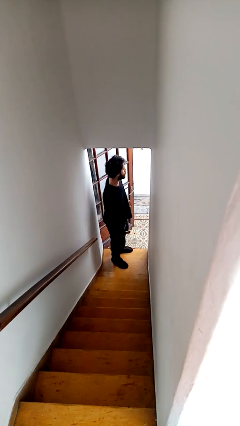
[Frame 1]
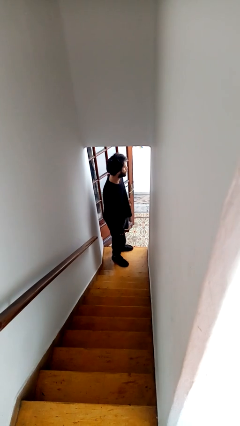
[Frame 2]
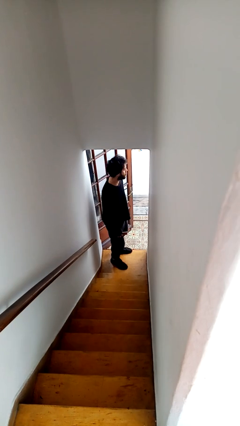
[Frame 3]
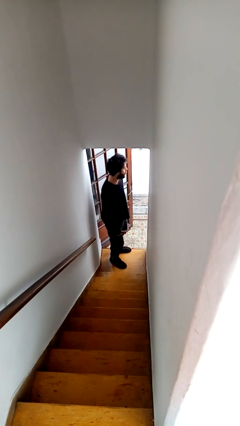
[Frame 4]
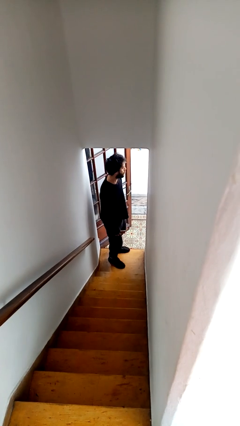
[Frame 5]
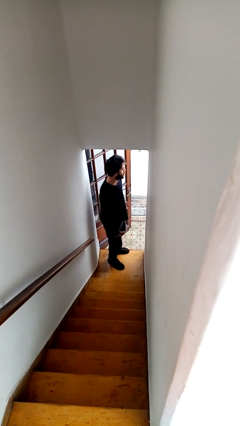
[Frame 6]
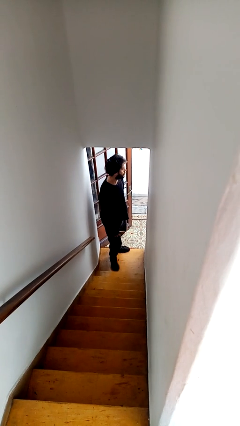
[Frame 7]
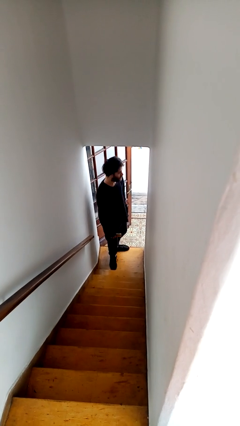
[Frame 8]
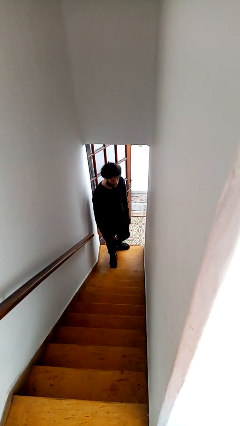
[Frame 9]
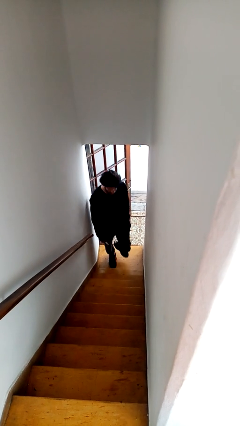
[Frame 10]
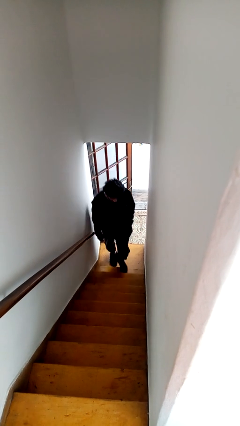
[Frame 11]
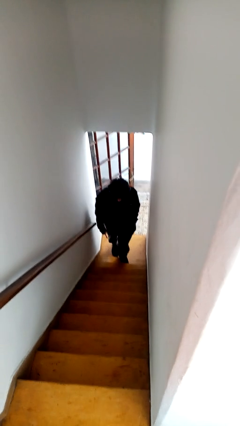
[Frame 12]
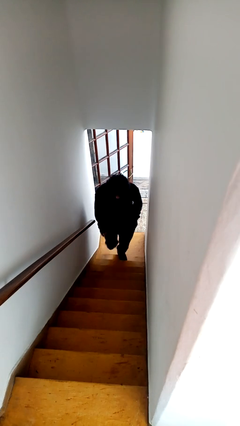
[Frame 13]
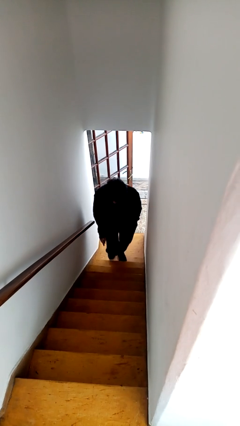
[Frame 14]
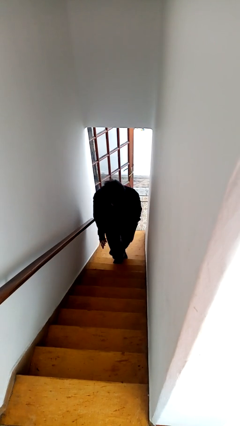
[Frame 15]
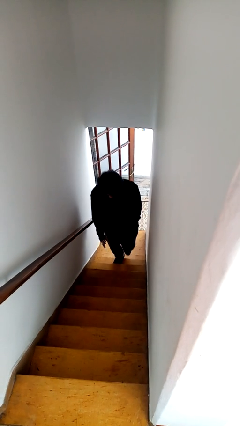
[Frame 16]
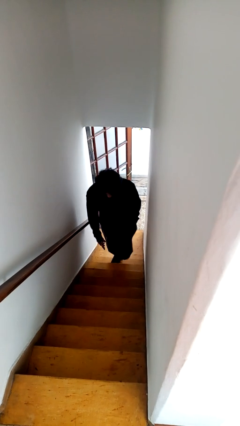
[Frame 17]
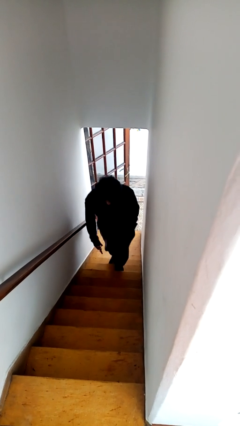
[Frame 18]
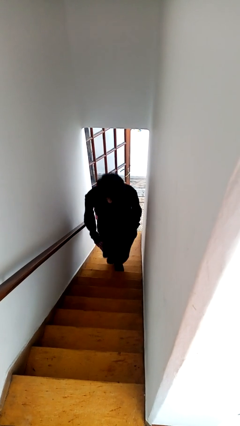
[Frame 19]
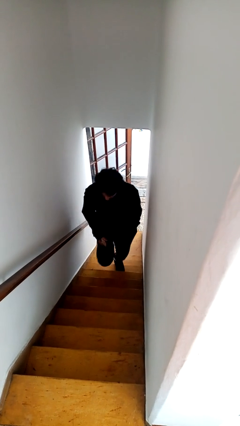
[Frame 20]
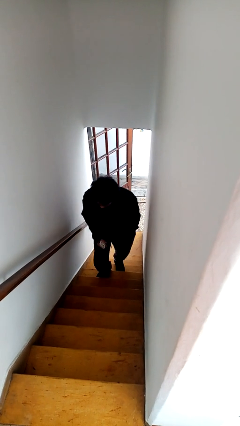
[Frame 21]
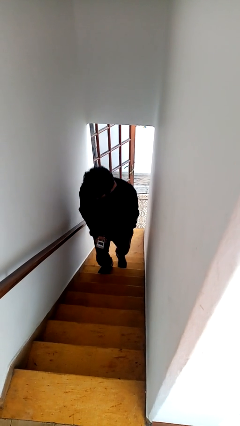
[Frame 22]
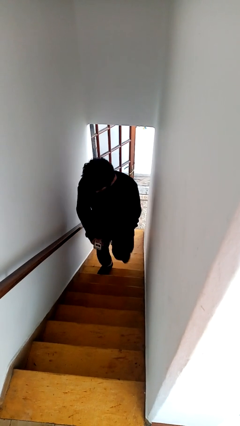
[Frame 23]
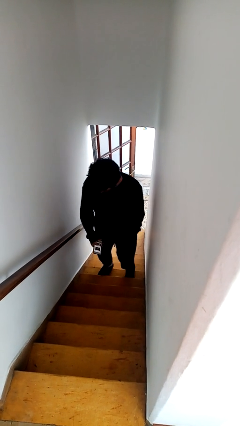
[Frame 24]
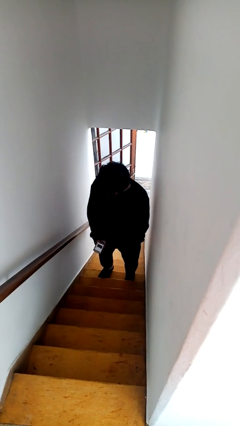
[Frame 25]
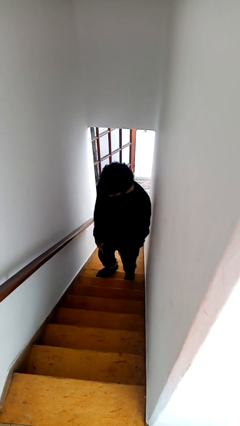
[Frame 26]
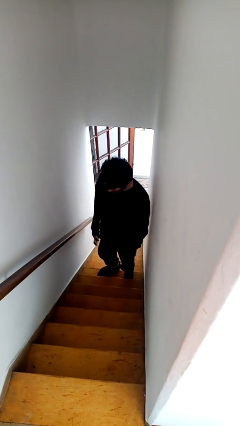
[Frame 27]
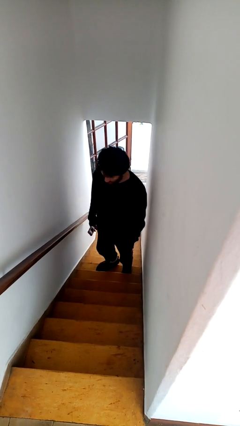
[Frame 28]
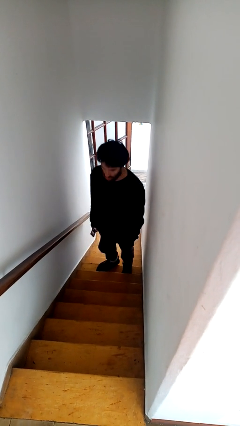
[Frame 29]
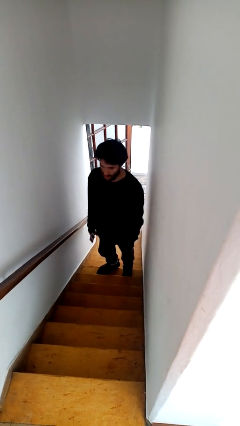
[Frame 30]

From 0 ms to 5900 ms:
person climbs up stairs

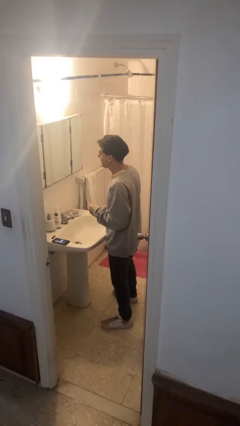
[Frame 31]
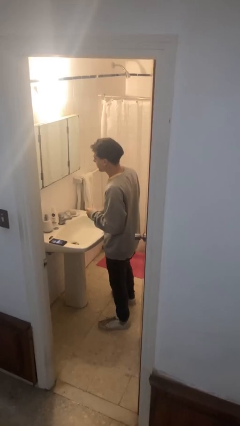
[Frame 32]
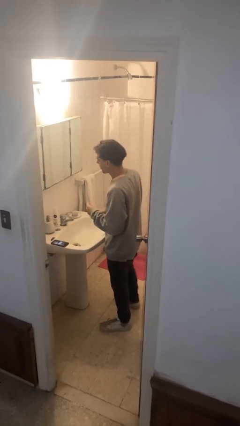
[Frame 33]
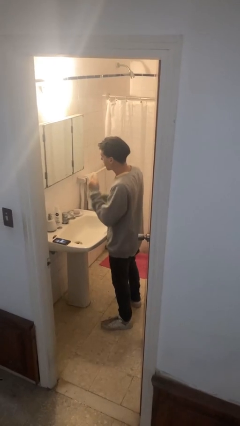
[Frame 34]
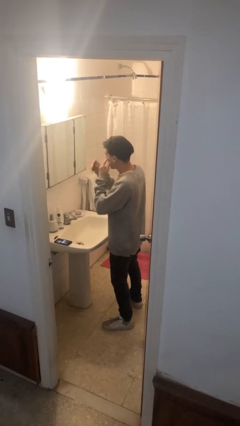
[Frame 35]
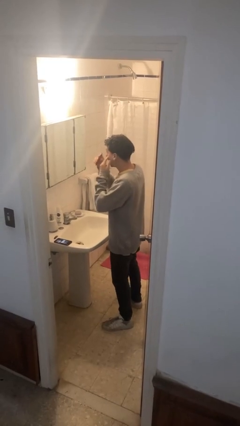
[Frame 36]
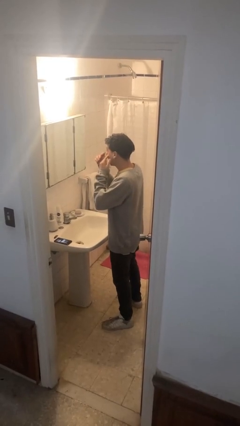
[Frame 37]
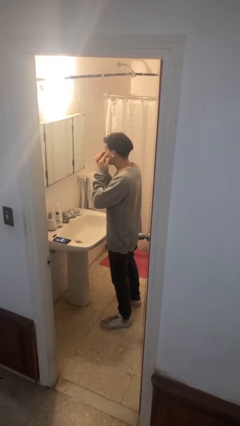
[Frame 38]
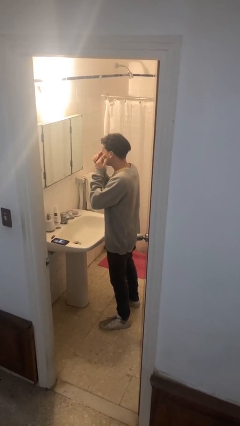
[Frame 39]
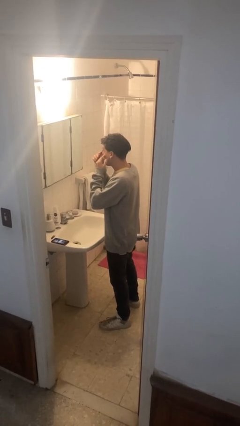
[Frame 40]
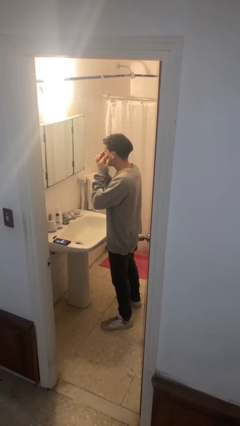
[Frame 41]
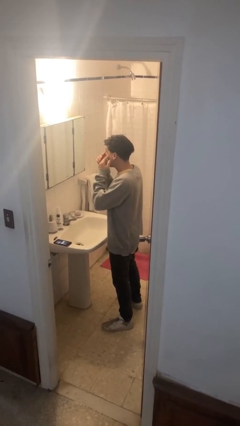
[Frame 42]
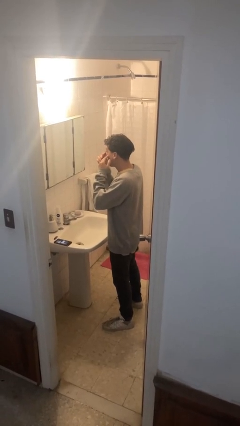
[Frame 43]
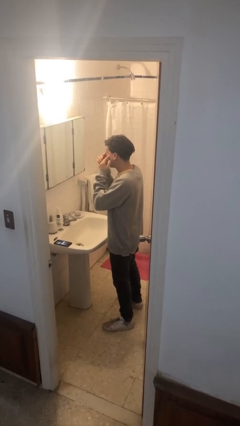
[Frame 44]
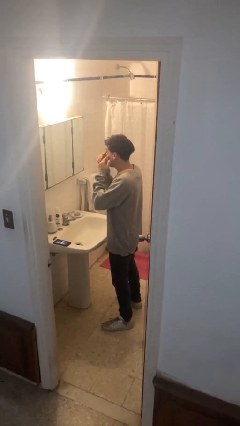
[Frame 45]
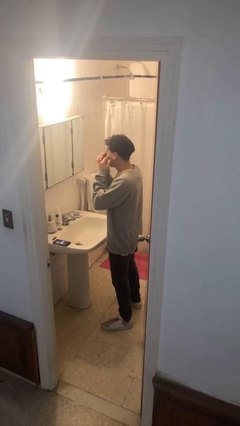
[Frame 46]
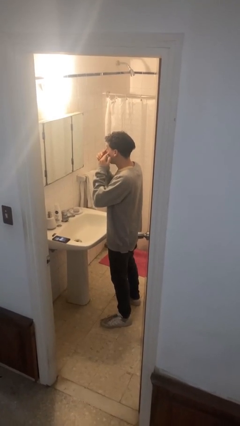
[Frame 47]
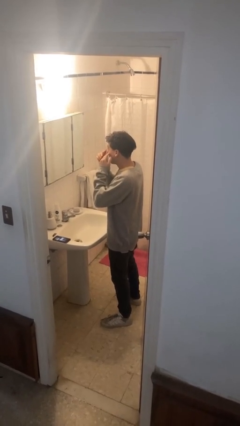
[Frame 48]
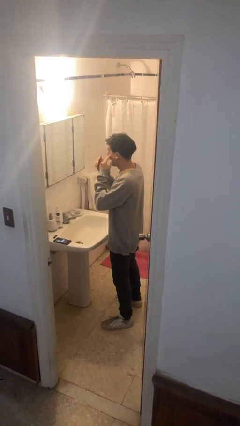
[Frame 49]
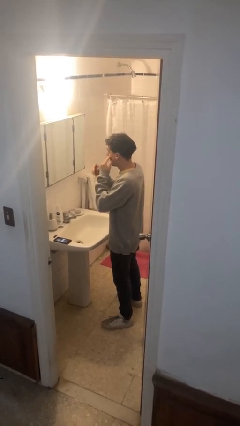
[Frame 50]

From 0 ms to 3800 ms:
person applies eye makeup

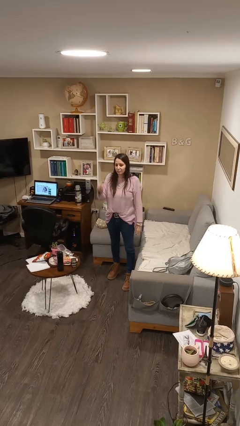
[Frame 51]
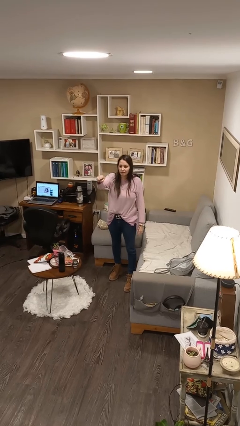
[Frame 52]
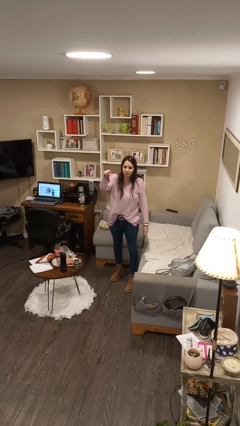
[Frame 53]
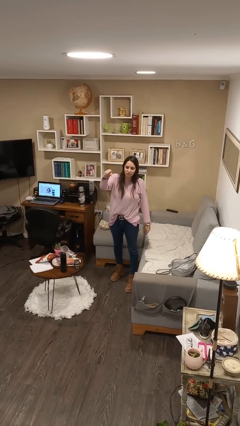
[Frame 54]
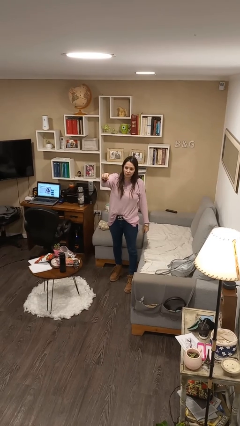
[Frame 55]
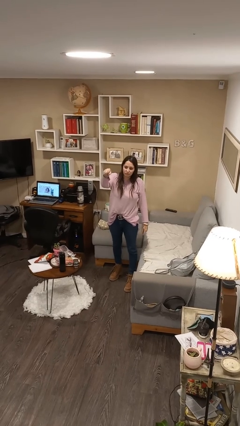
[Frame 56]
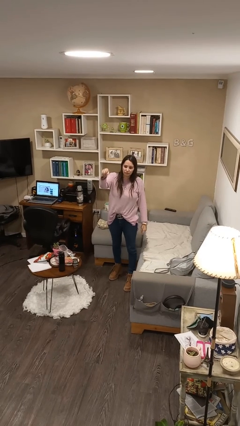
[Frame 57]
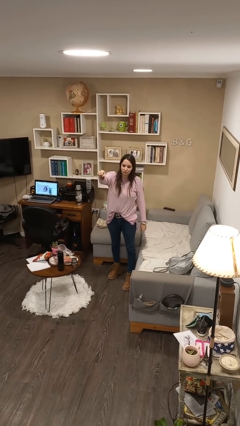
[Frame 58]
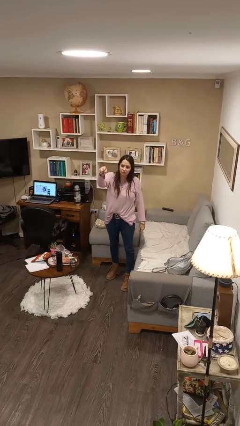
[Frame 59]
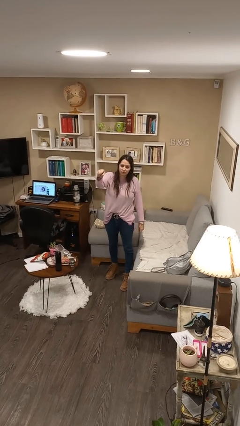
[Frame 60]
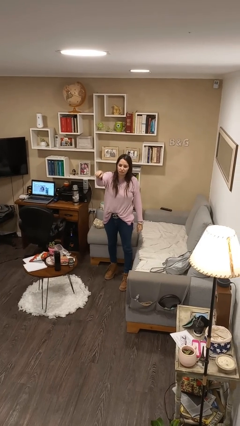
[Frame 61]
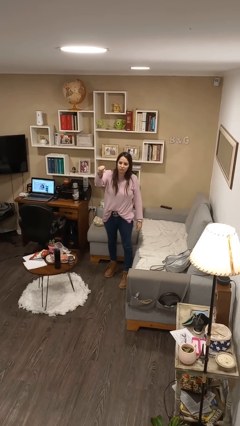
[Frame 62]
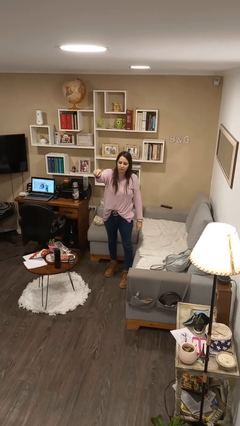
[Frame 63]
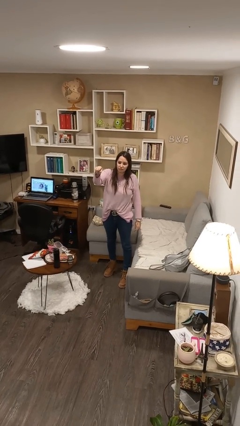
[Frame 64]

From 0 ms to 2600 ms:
person points at person

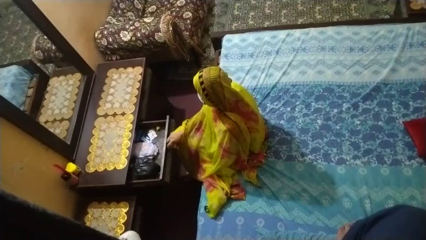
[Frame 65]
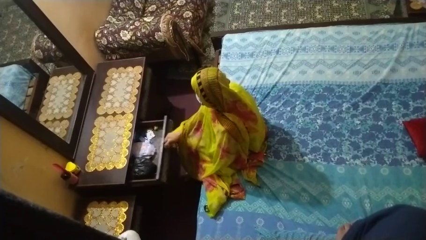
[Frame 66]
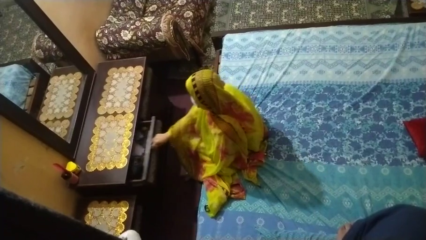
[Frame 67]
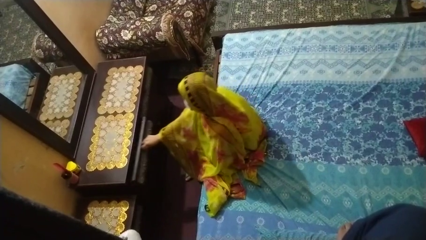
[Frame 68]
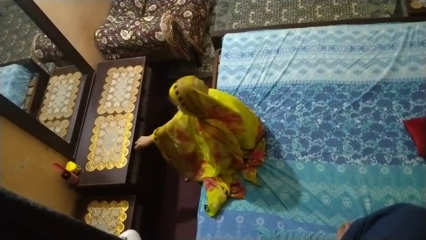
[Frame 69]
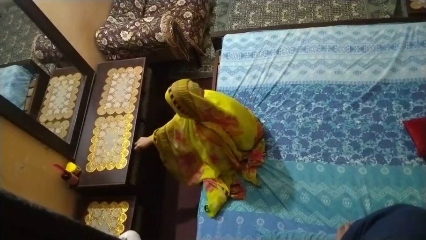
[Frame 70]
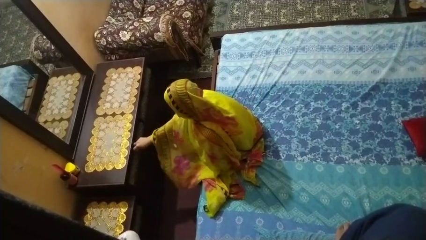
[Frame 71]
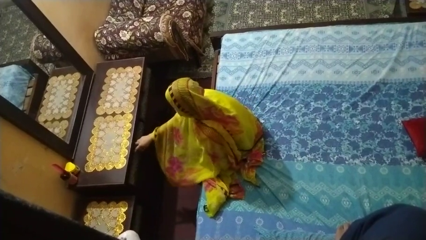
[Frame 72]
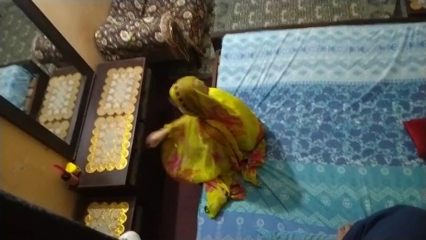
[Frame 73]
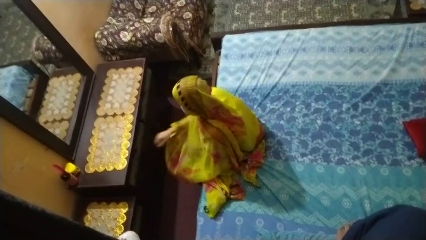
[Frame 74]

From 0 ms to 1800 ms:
person closes dresser drawer

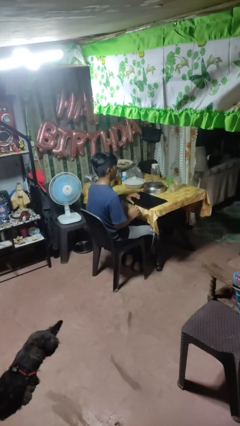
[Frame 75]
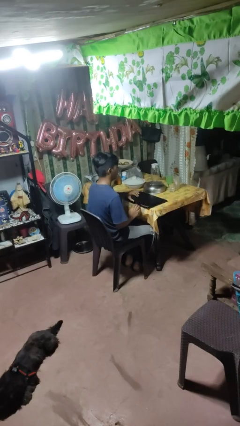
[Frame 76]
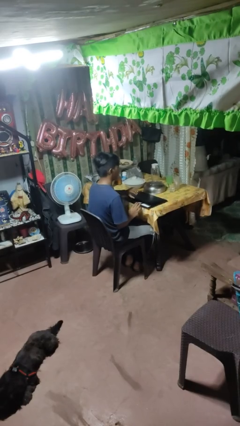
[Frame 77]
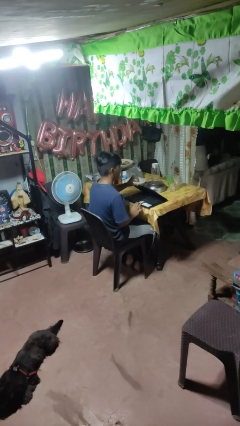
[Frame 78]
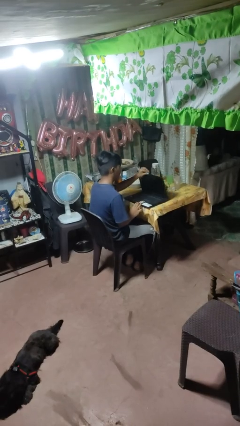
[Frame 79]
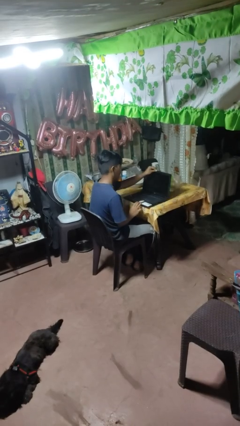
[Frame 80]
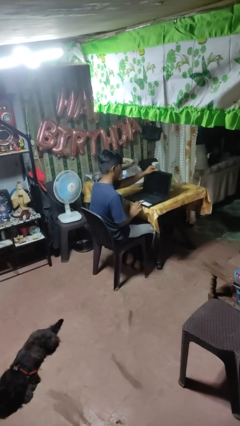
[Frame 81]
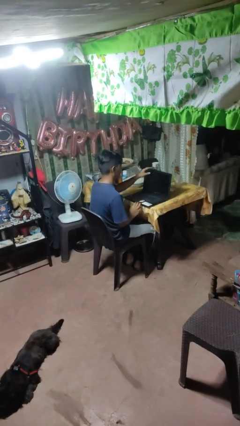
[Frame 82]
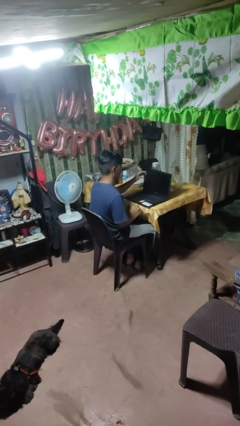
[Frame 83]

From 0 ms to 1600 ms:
person opens laptop

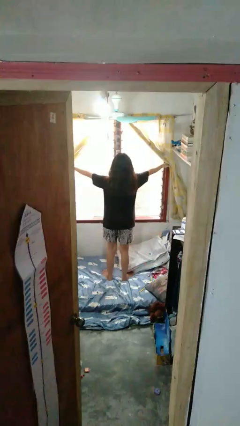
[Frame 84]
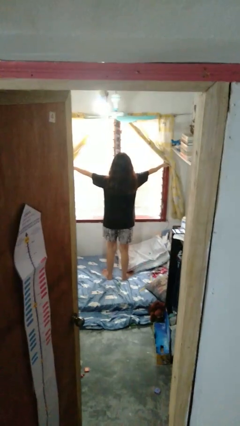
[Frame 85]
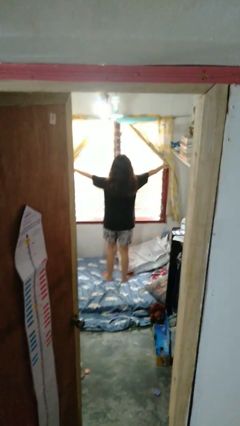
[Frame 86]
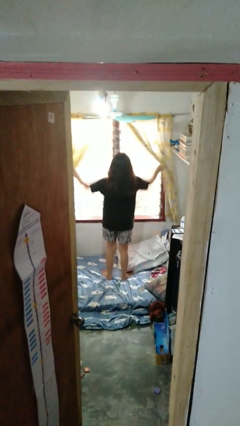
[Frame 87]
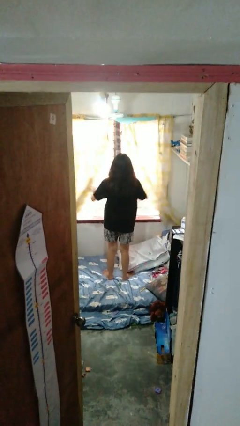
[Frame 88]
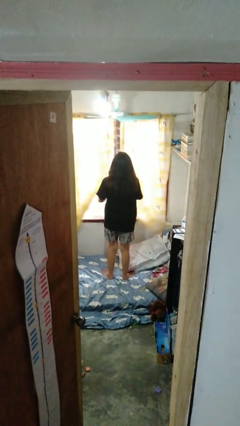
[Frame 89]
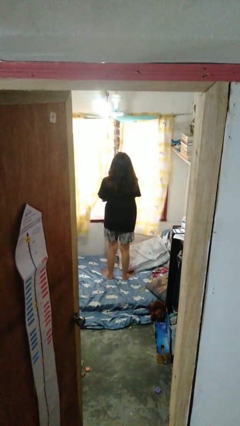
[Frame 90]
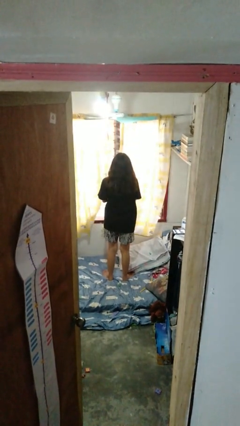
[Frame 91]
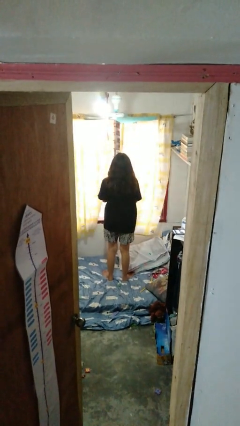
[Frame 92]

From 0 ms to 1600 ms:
person closes curtains

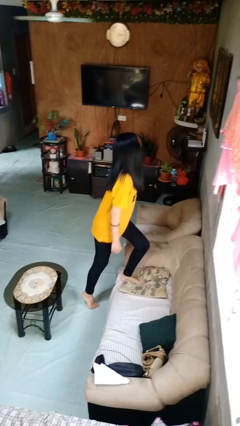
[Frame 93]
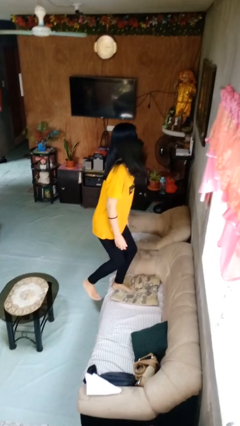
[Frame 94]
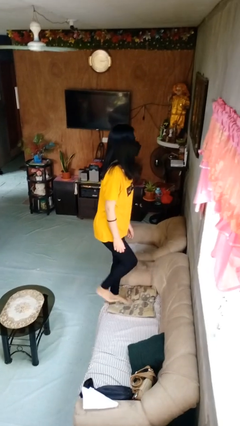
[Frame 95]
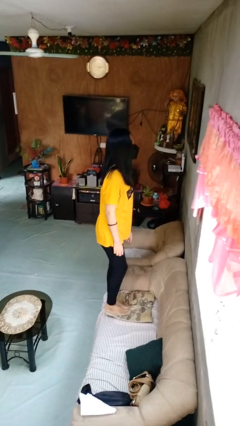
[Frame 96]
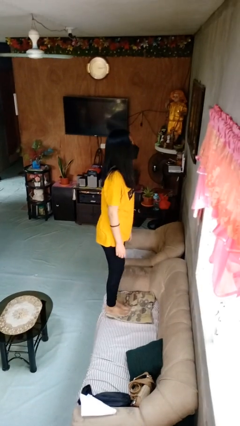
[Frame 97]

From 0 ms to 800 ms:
person climbs on couch
